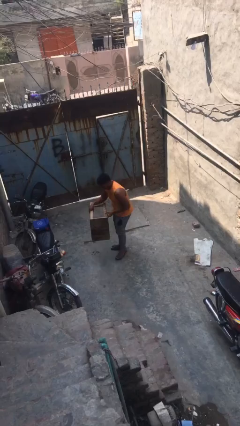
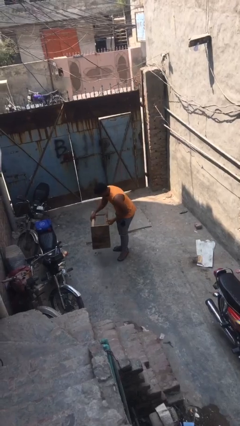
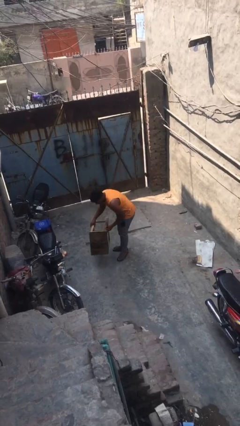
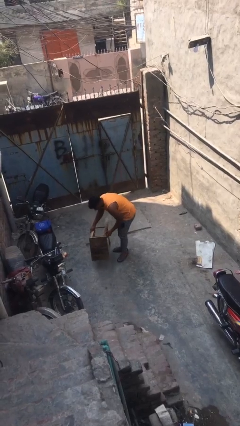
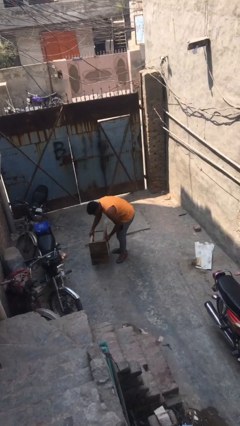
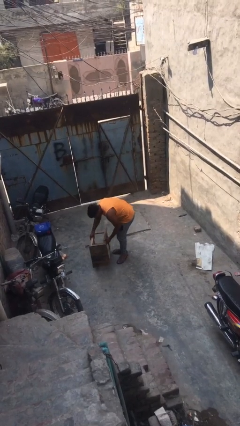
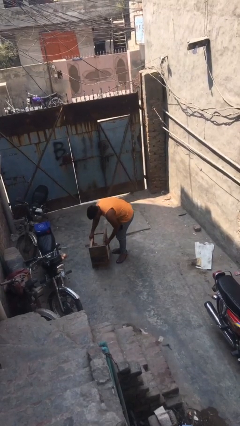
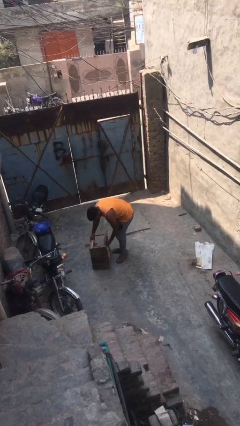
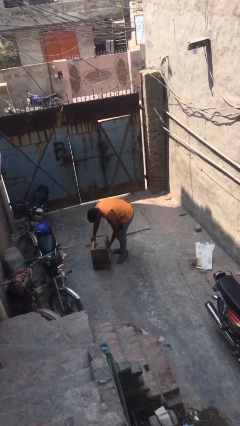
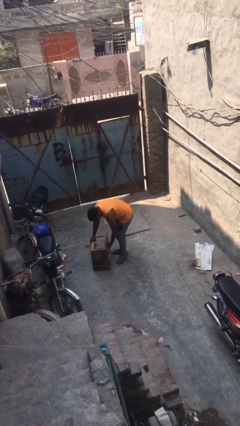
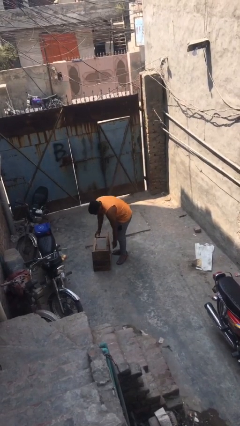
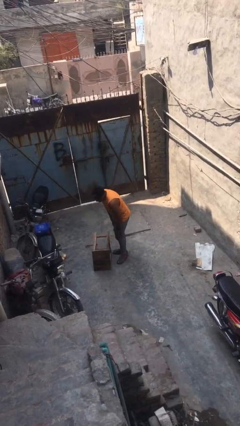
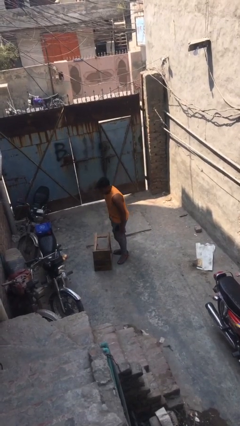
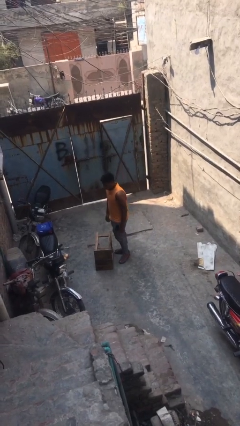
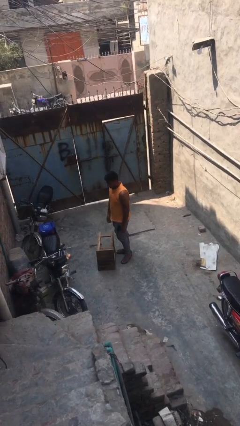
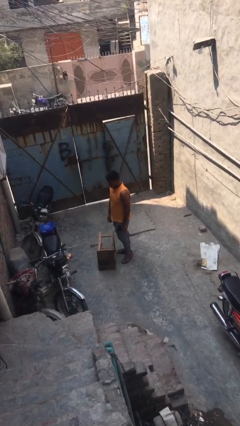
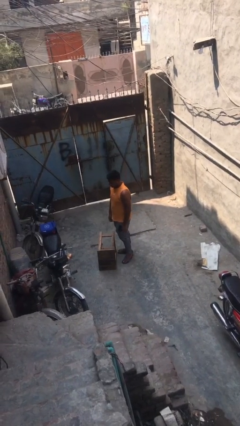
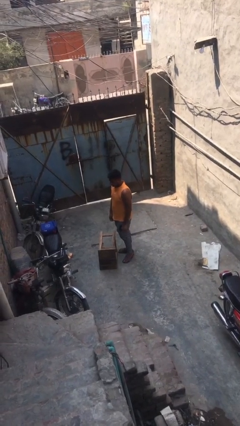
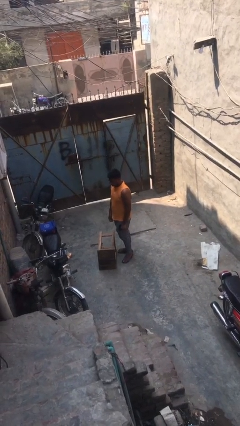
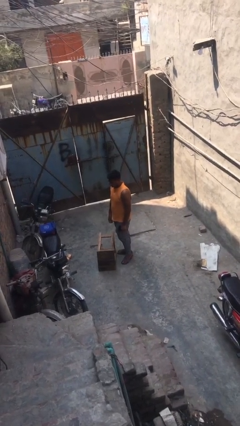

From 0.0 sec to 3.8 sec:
person puts down object on floor

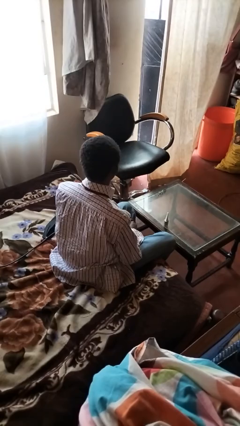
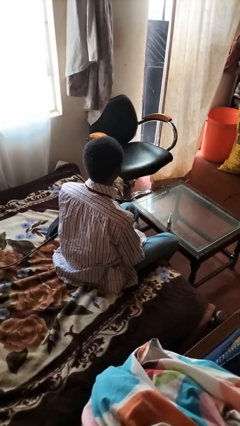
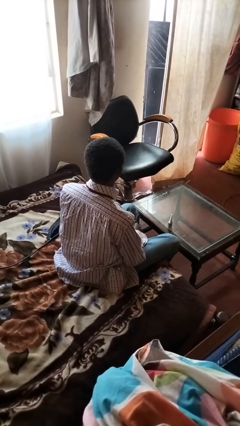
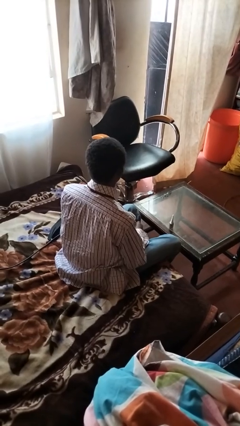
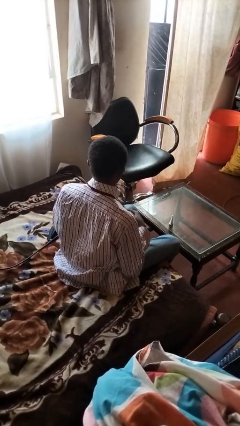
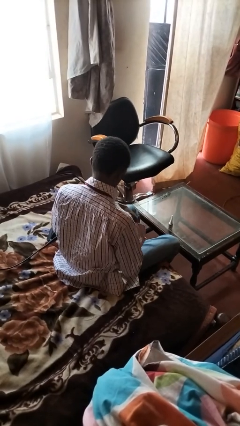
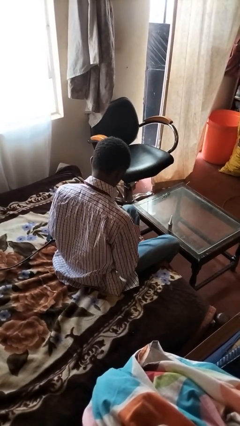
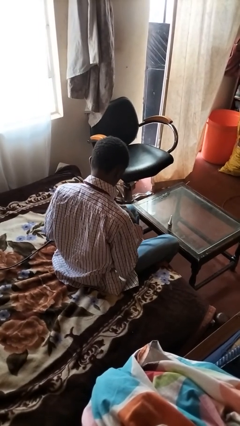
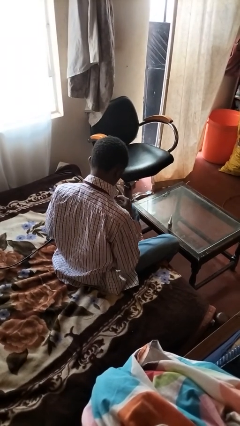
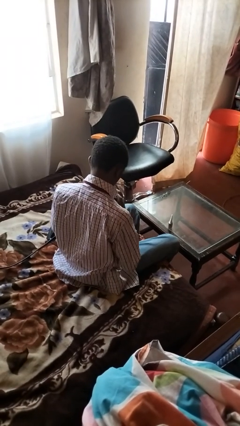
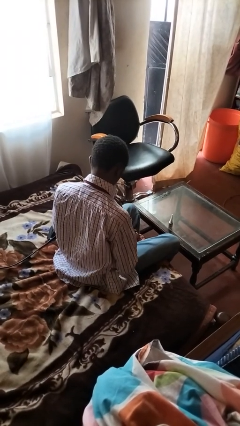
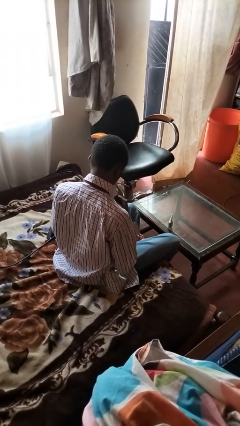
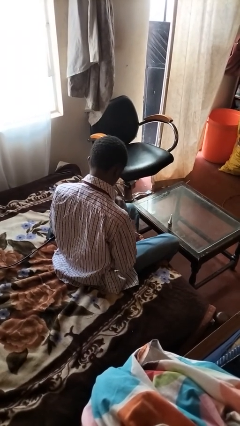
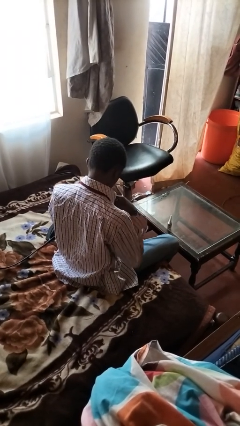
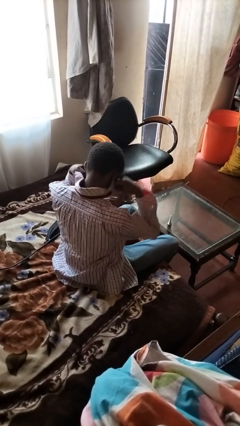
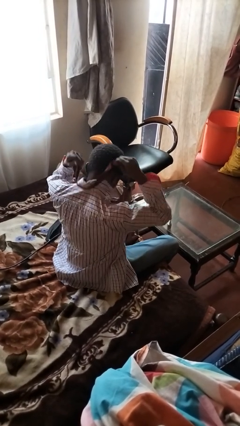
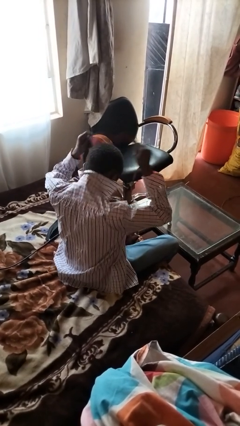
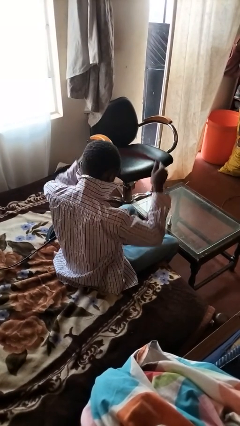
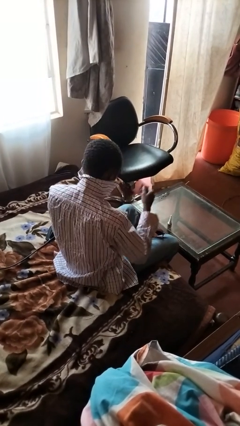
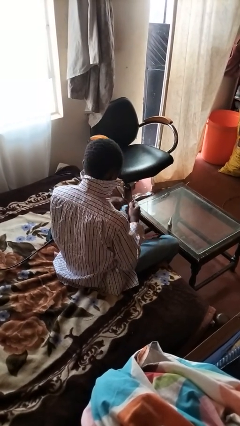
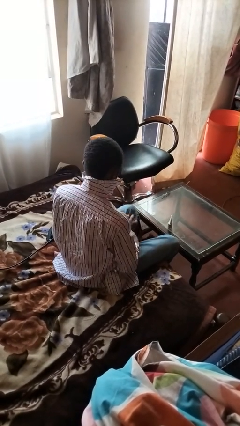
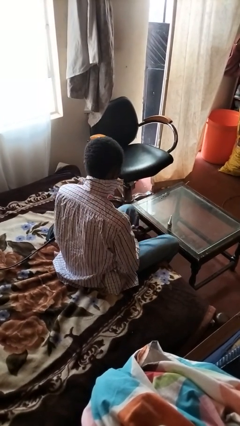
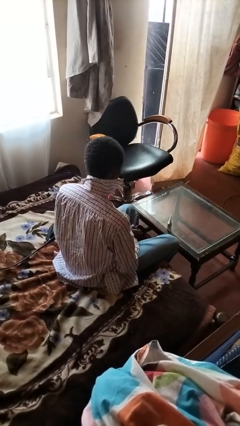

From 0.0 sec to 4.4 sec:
person takes off necktie

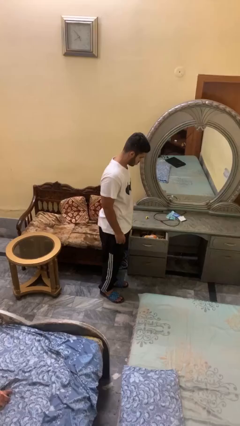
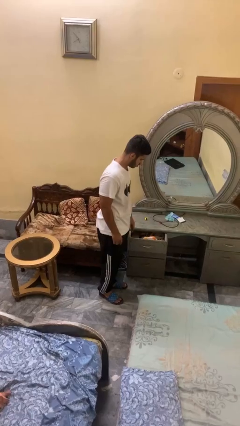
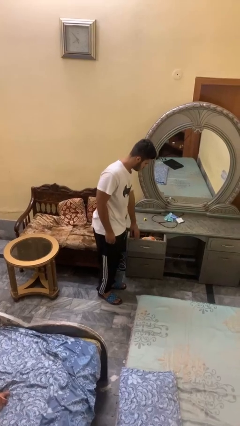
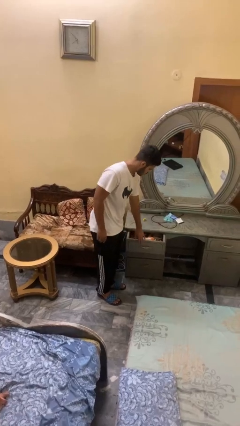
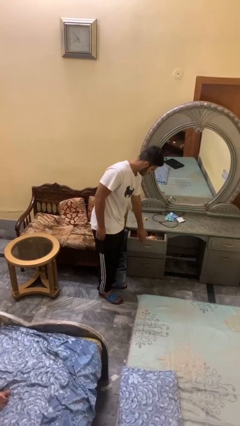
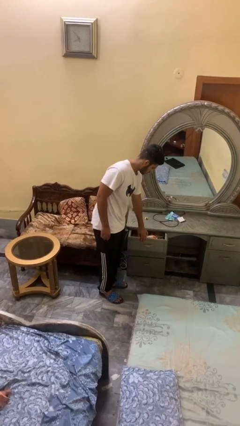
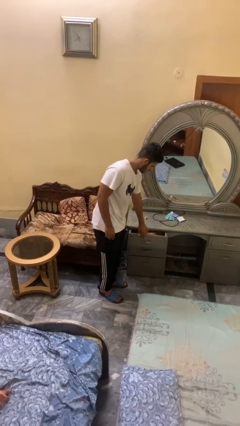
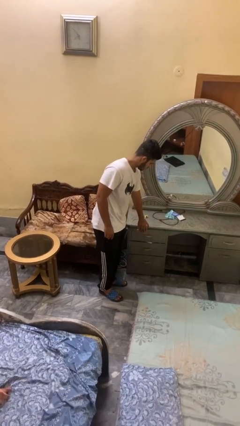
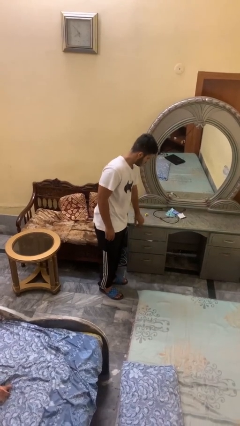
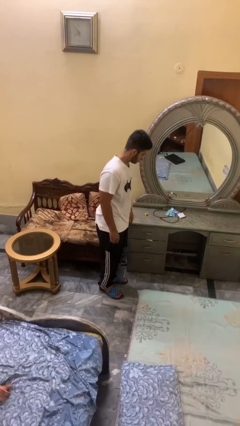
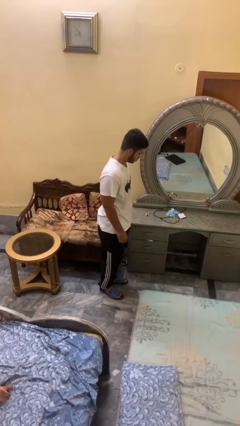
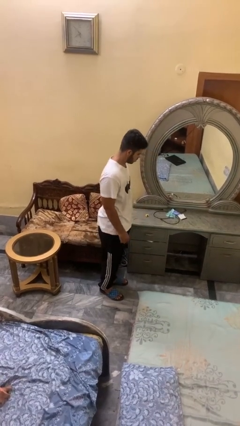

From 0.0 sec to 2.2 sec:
person closes dresser drawer

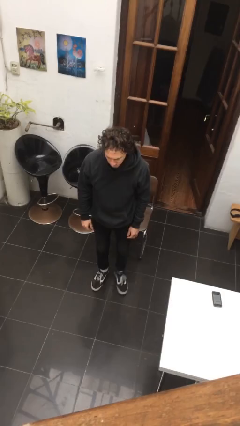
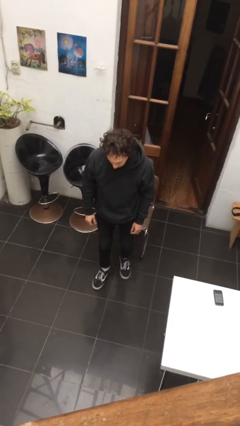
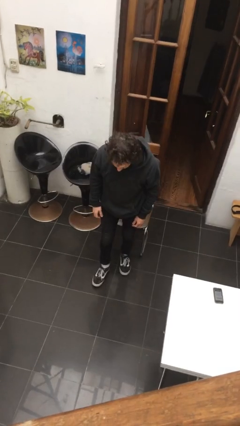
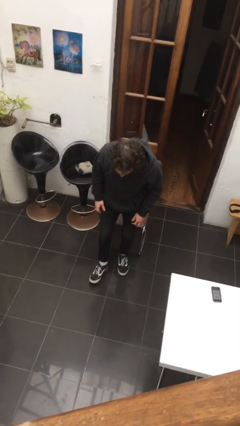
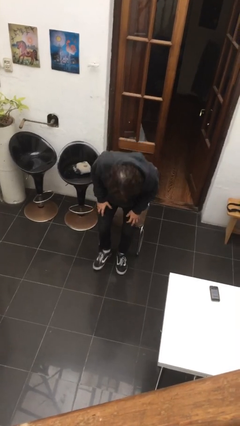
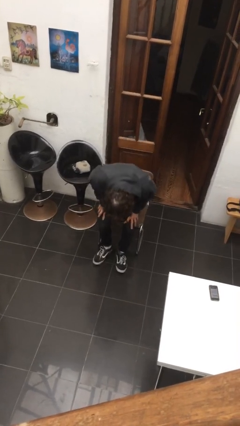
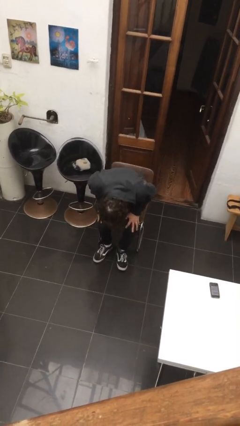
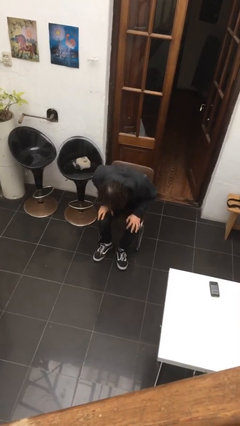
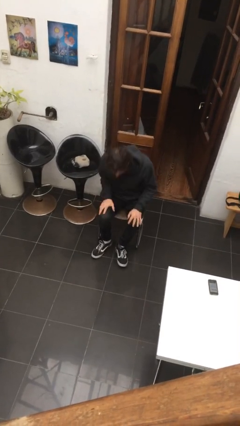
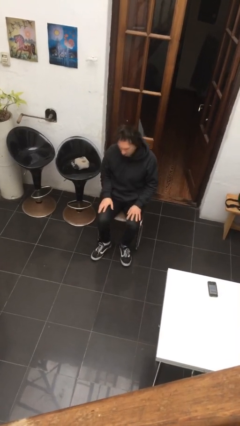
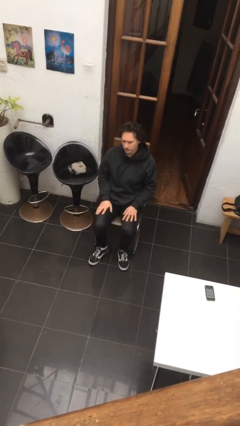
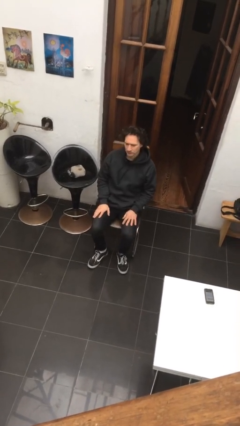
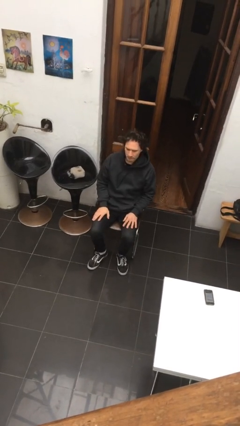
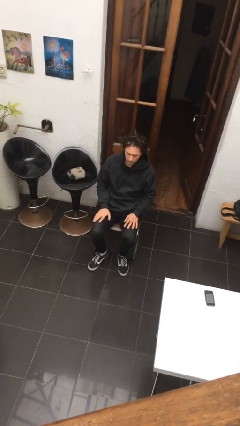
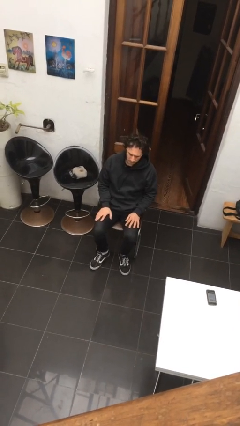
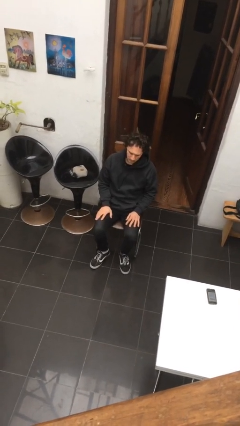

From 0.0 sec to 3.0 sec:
person sits down

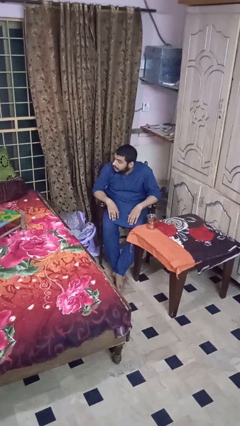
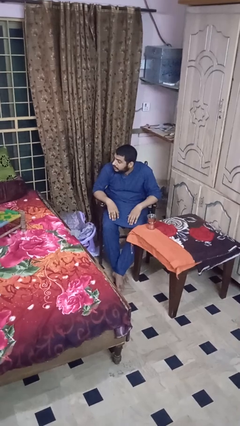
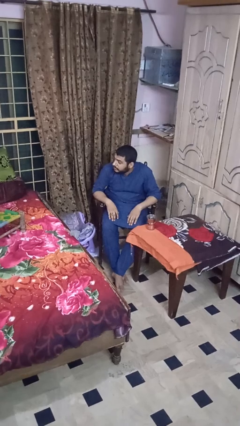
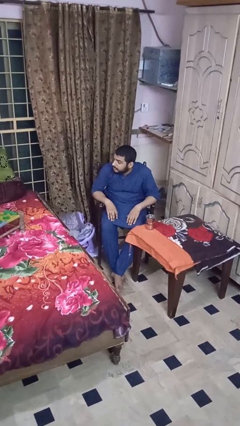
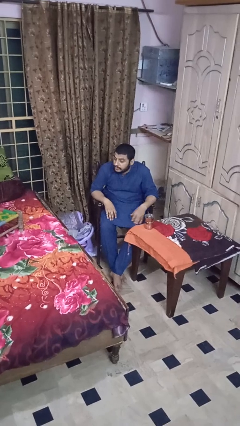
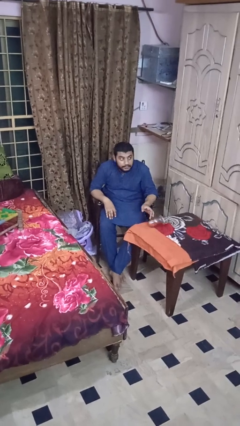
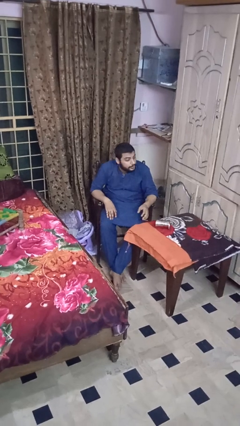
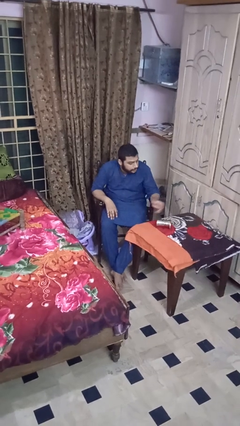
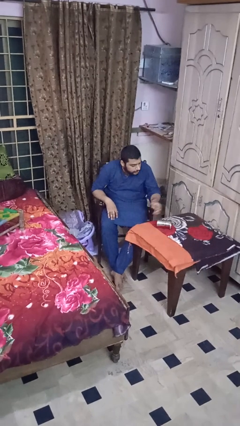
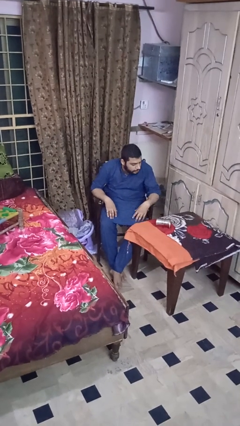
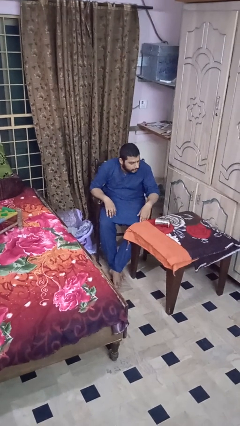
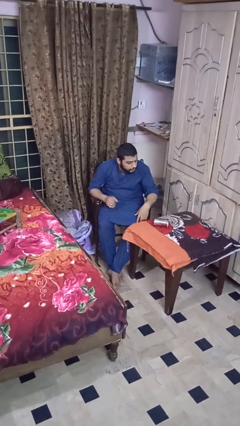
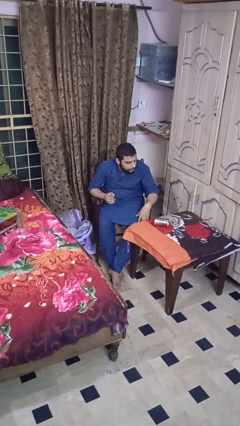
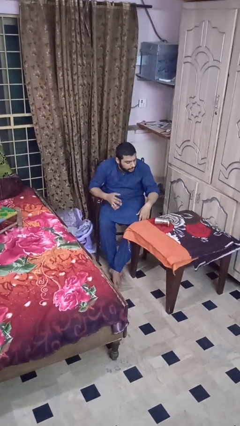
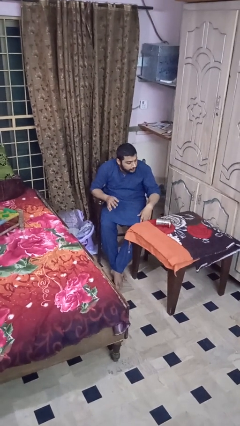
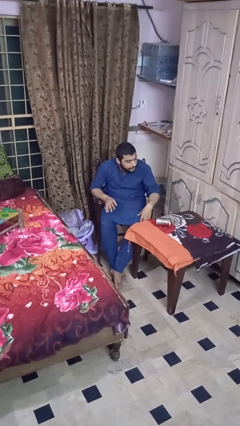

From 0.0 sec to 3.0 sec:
person knocks over glass

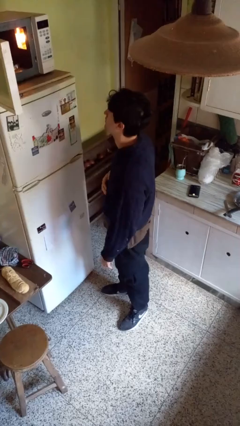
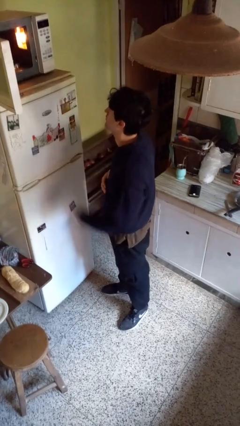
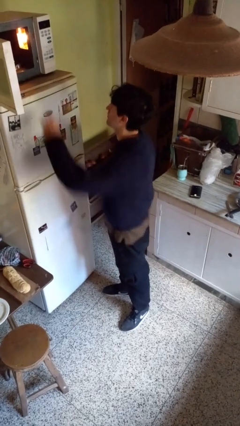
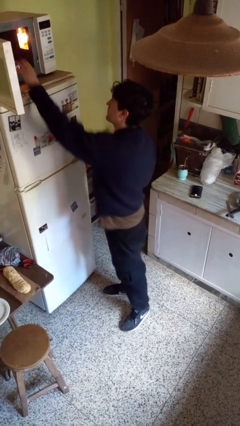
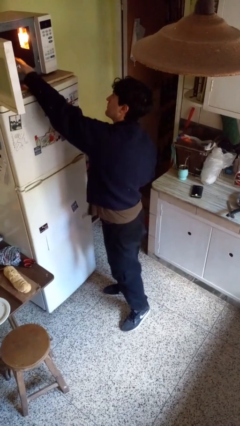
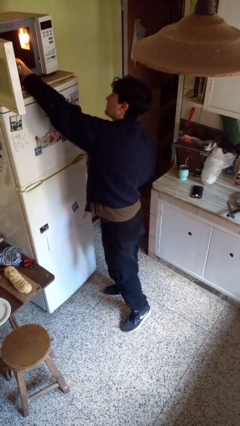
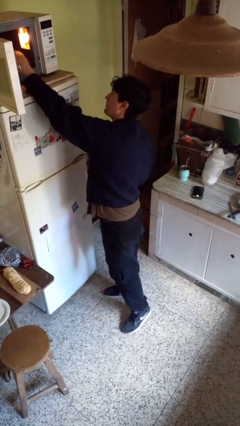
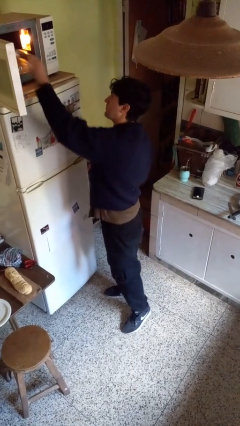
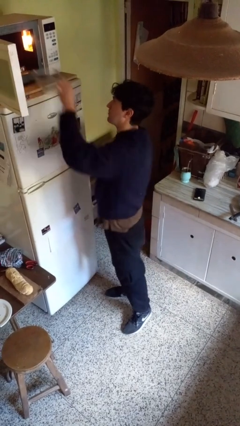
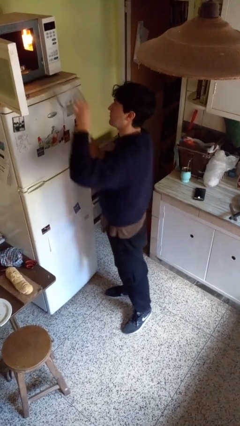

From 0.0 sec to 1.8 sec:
person takes object from microwave
